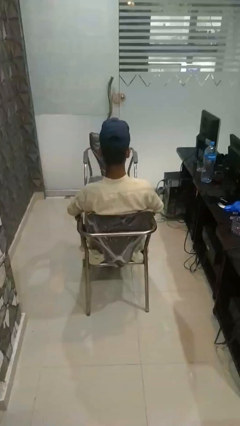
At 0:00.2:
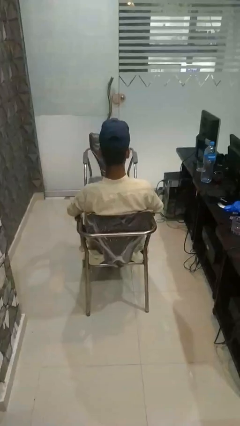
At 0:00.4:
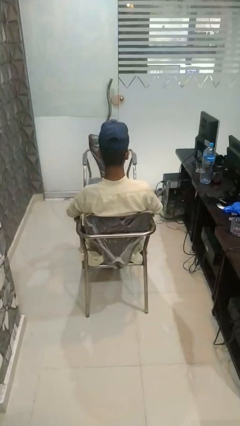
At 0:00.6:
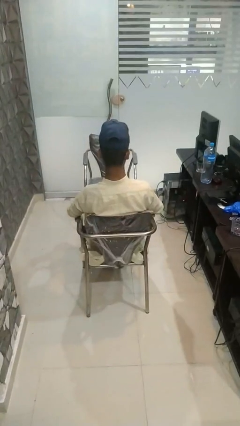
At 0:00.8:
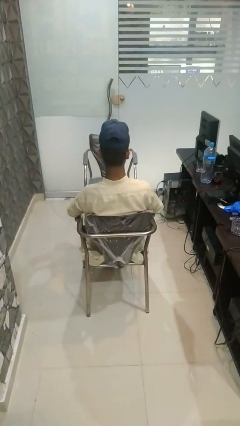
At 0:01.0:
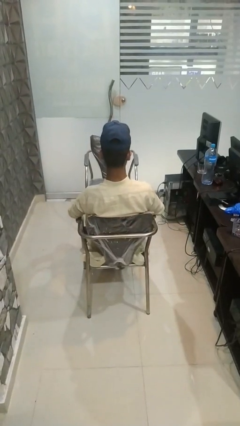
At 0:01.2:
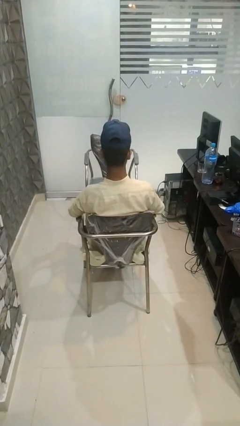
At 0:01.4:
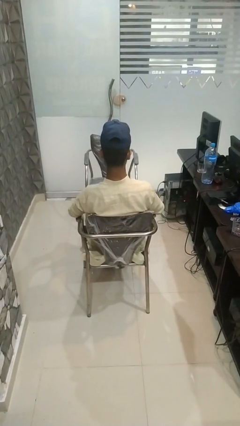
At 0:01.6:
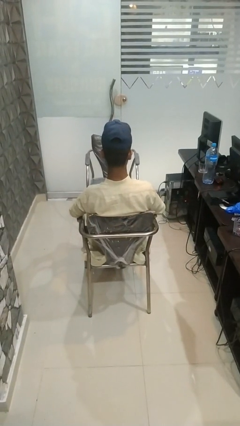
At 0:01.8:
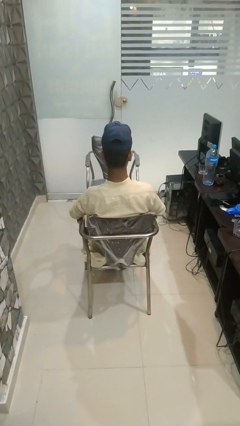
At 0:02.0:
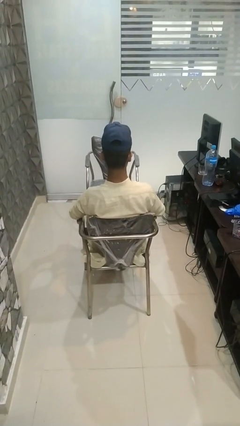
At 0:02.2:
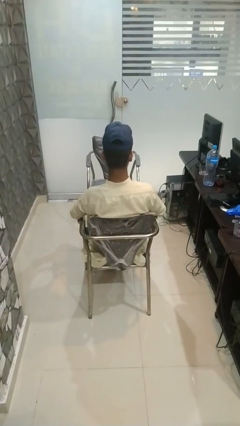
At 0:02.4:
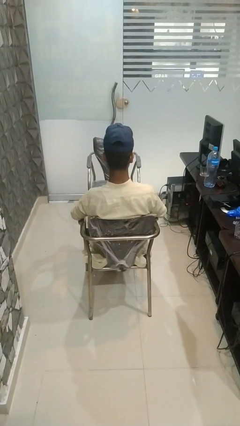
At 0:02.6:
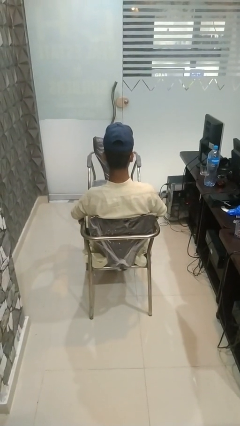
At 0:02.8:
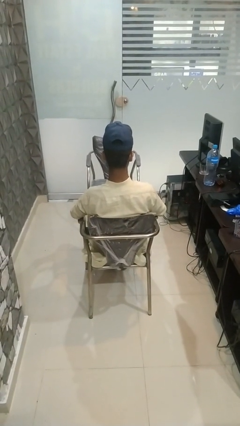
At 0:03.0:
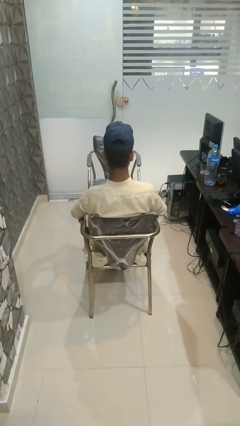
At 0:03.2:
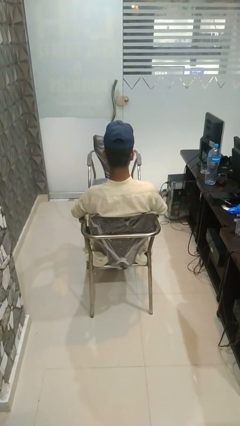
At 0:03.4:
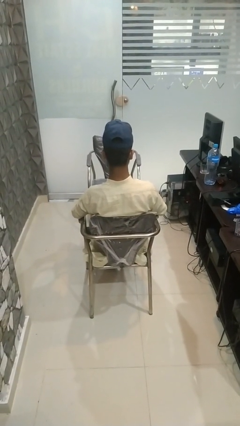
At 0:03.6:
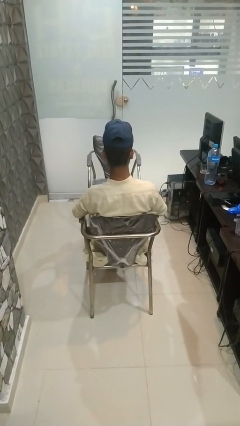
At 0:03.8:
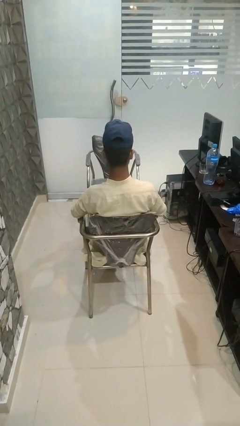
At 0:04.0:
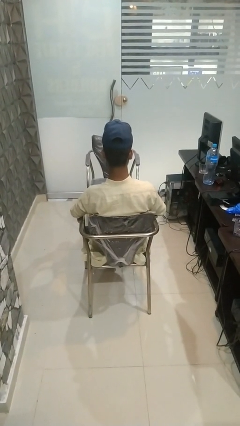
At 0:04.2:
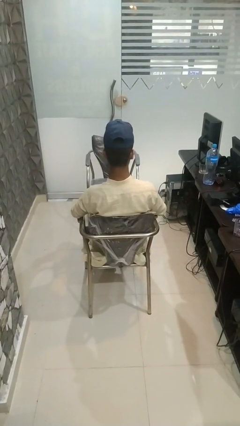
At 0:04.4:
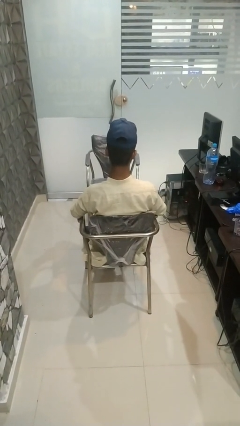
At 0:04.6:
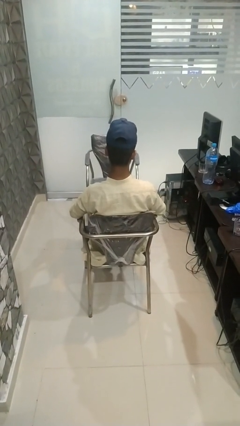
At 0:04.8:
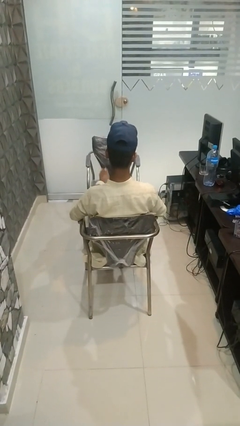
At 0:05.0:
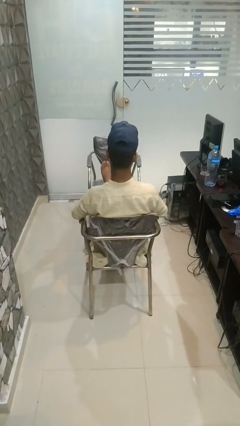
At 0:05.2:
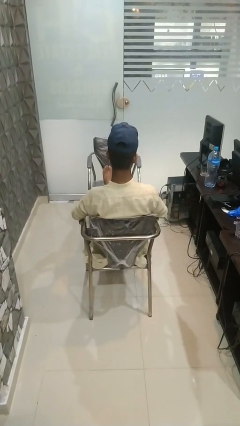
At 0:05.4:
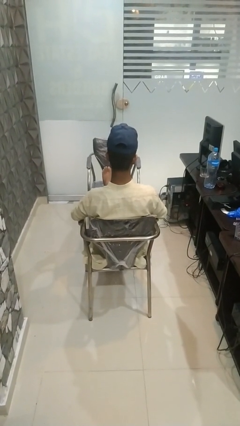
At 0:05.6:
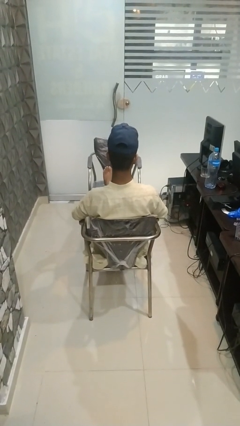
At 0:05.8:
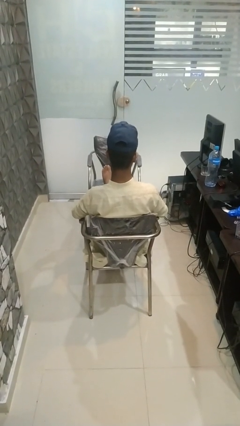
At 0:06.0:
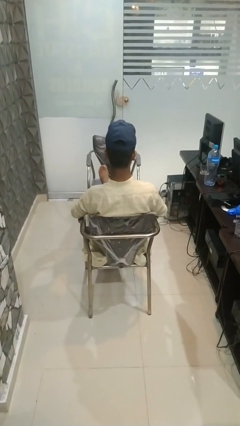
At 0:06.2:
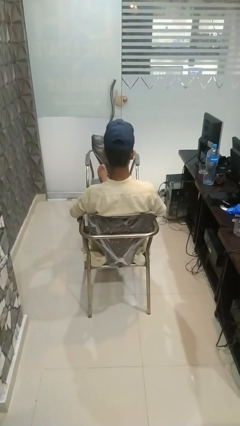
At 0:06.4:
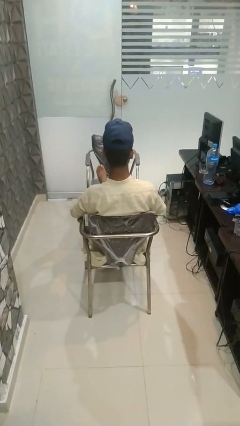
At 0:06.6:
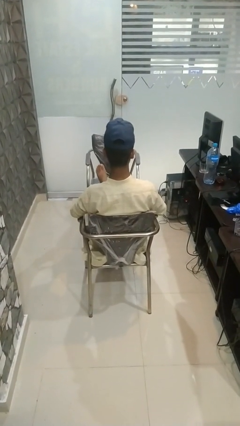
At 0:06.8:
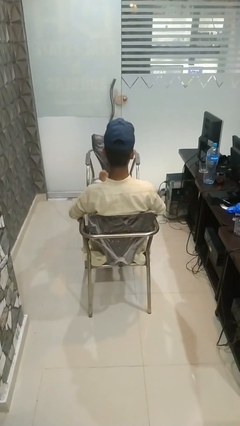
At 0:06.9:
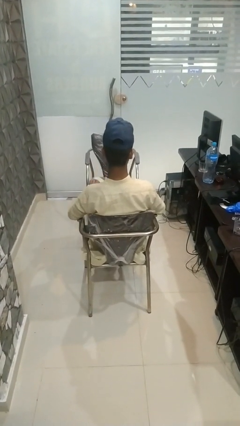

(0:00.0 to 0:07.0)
person puts feet up

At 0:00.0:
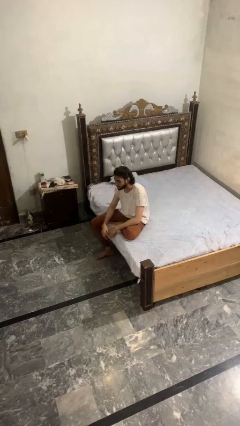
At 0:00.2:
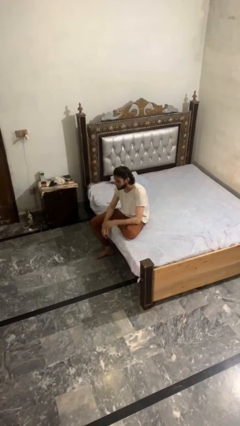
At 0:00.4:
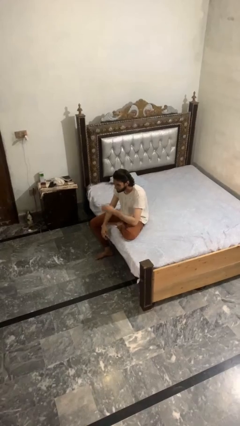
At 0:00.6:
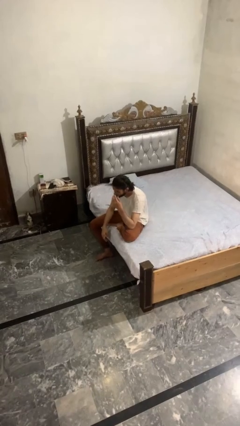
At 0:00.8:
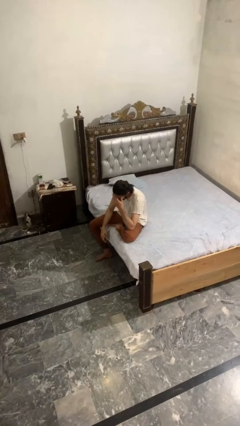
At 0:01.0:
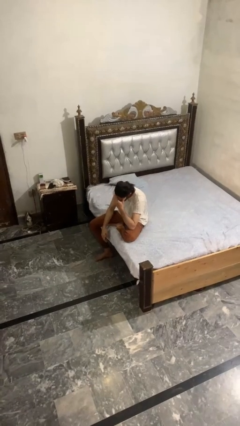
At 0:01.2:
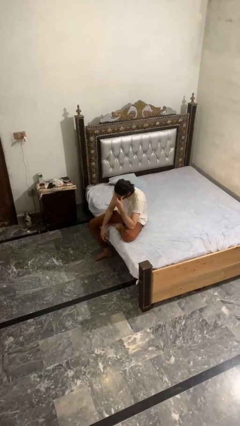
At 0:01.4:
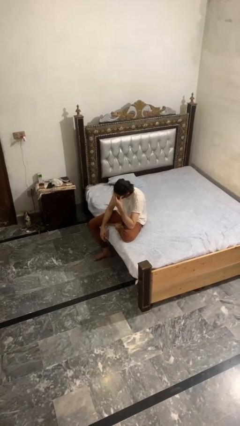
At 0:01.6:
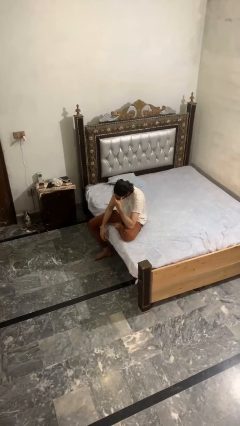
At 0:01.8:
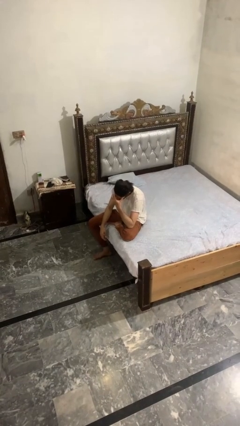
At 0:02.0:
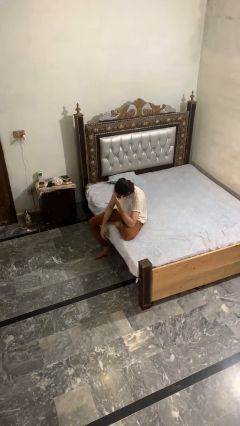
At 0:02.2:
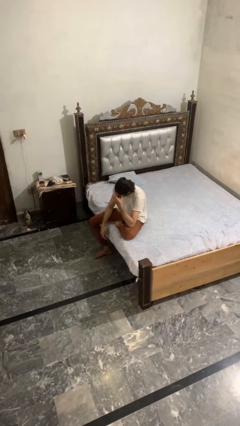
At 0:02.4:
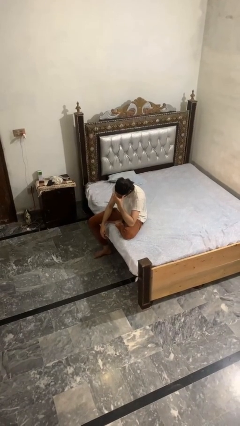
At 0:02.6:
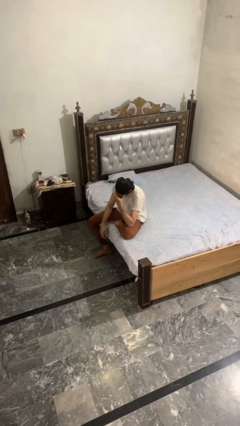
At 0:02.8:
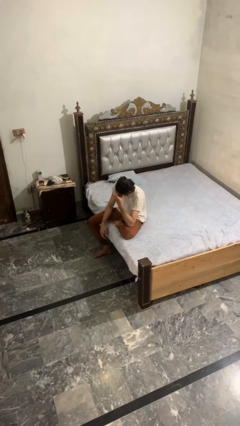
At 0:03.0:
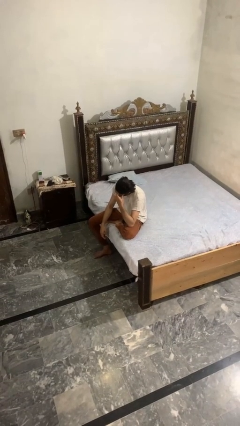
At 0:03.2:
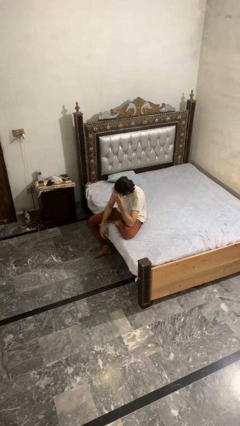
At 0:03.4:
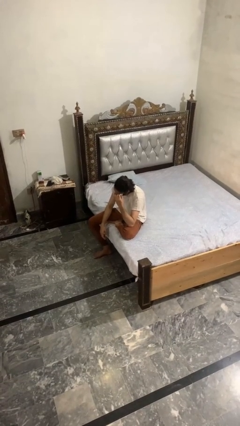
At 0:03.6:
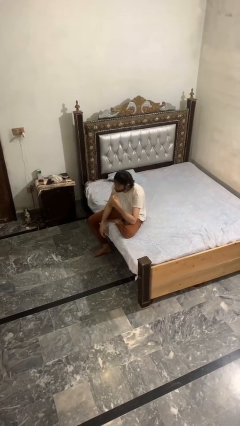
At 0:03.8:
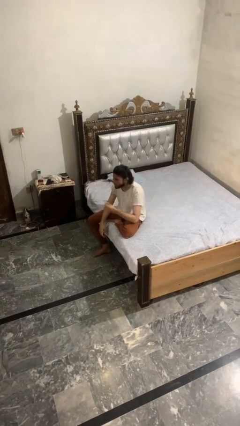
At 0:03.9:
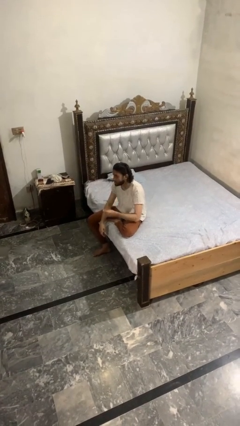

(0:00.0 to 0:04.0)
person scratches face

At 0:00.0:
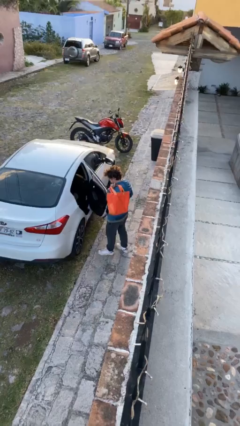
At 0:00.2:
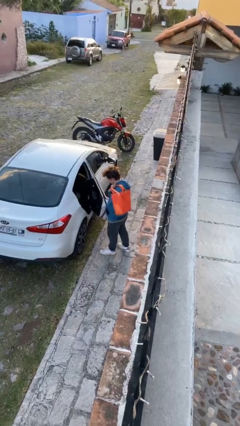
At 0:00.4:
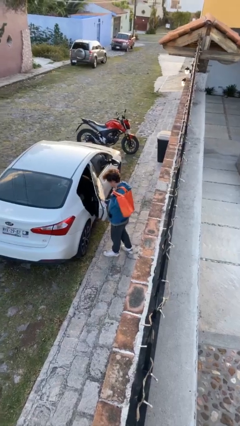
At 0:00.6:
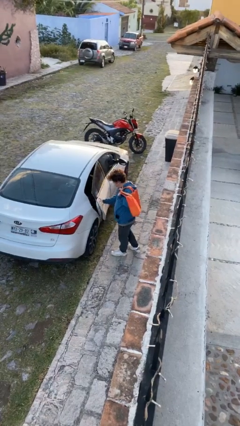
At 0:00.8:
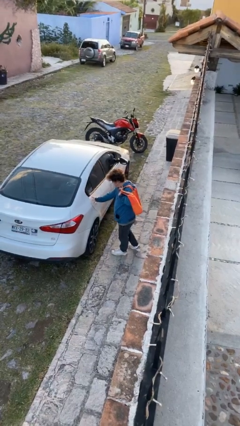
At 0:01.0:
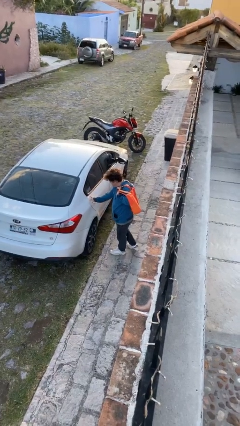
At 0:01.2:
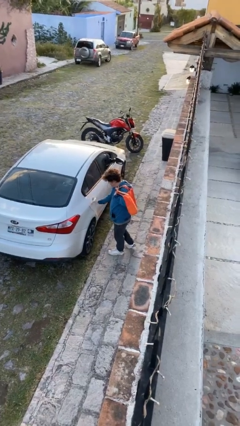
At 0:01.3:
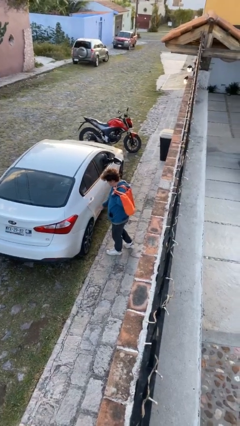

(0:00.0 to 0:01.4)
person closes car door

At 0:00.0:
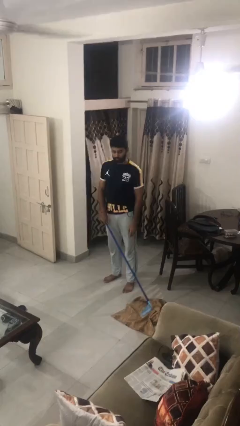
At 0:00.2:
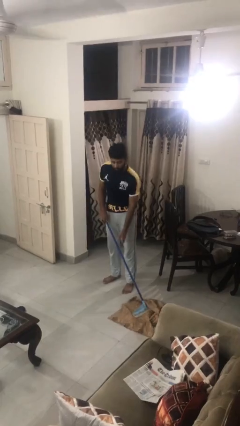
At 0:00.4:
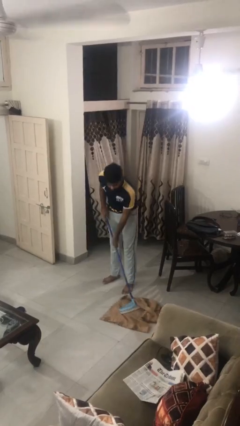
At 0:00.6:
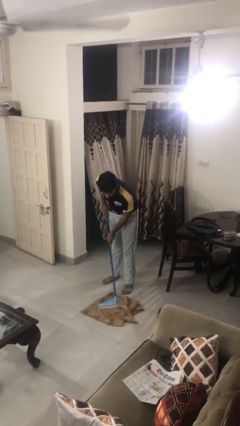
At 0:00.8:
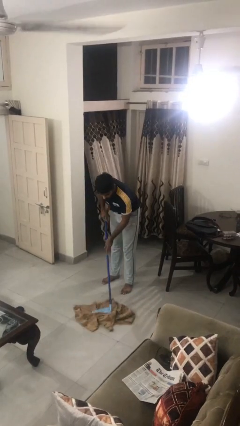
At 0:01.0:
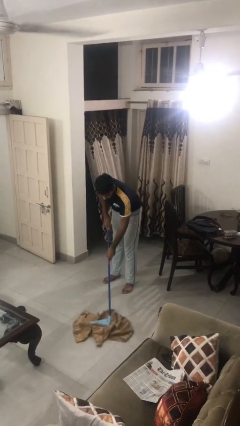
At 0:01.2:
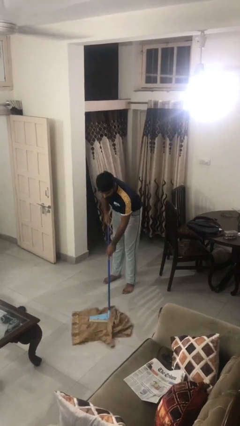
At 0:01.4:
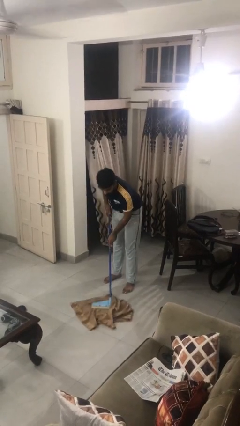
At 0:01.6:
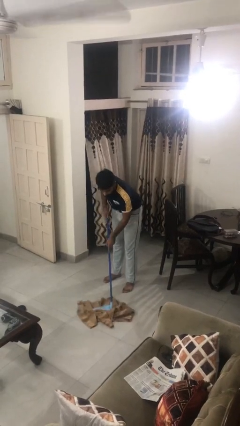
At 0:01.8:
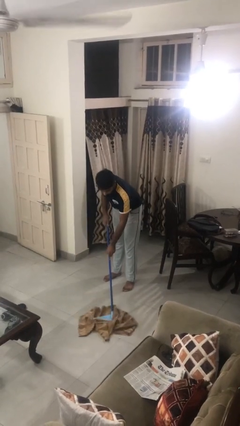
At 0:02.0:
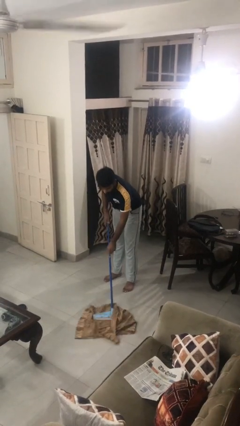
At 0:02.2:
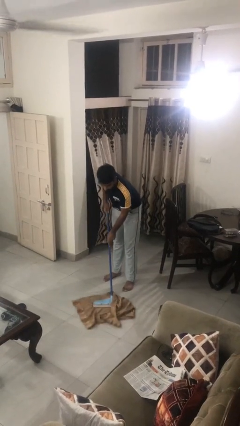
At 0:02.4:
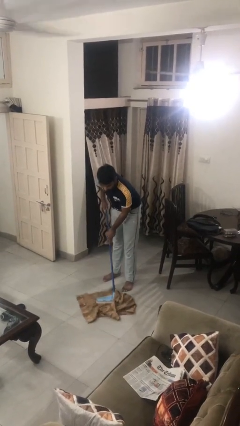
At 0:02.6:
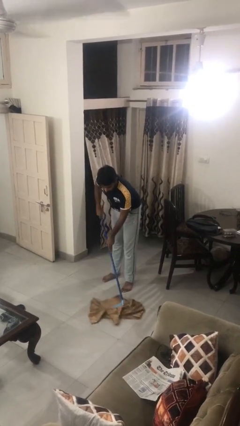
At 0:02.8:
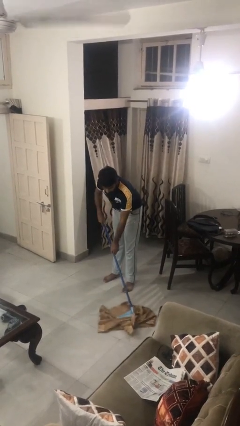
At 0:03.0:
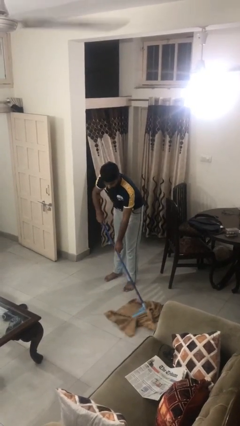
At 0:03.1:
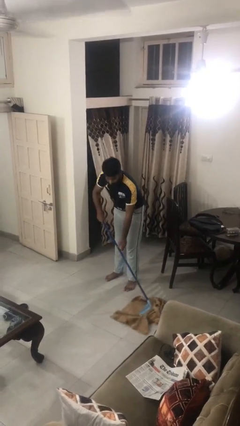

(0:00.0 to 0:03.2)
person mops

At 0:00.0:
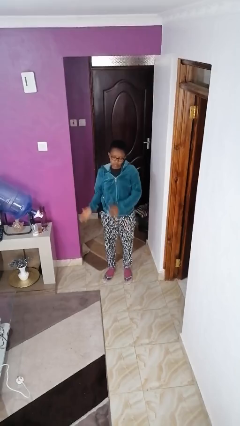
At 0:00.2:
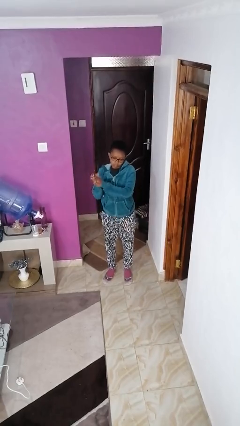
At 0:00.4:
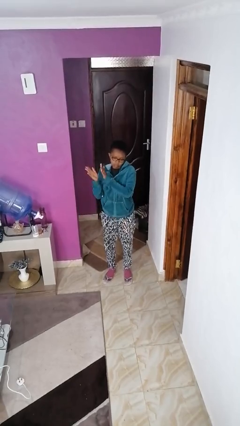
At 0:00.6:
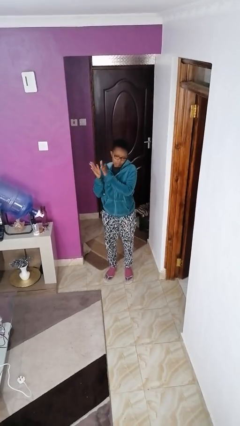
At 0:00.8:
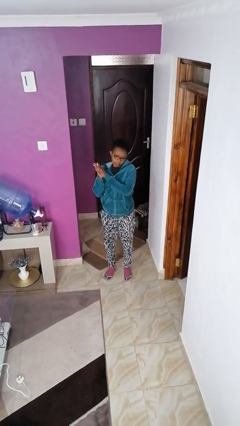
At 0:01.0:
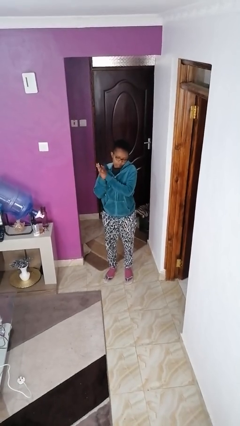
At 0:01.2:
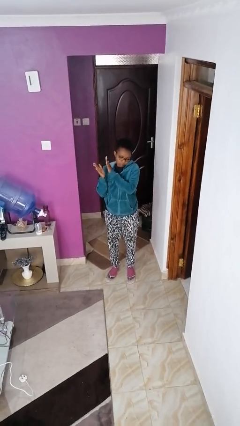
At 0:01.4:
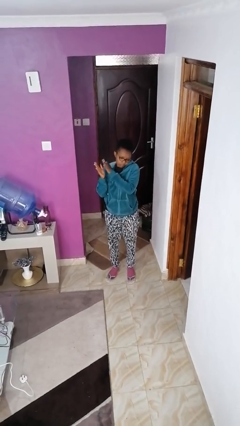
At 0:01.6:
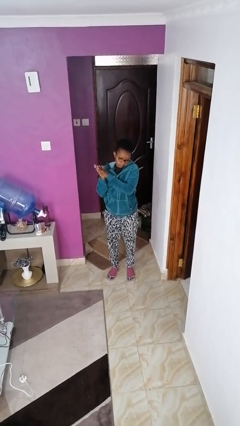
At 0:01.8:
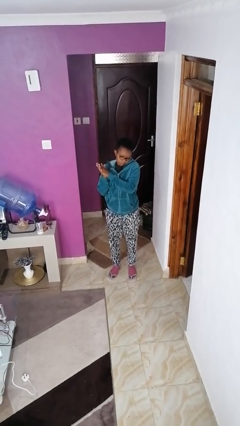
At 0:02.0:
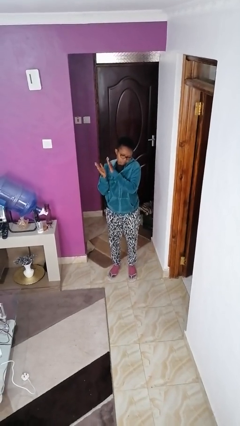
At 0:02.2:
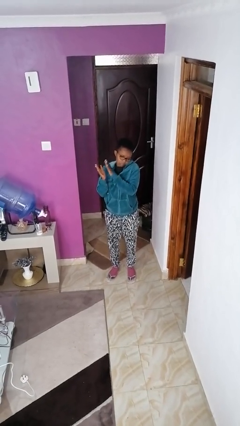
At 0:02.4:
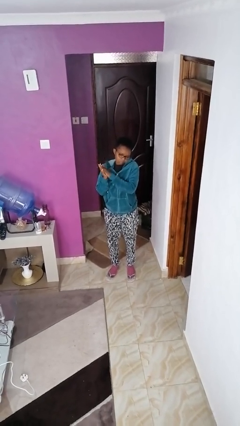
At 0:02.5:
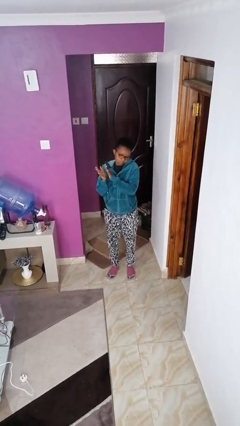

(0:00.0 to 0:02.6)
person claps hands
